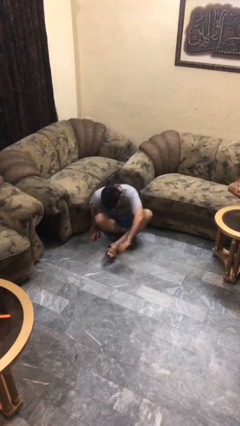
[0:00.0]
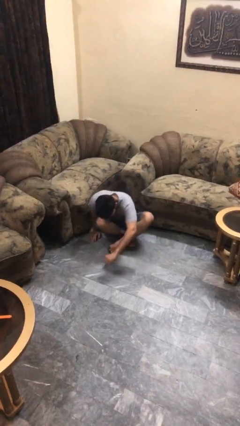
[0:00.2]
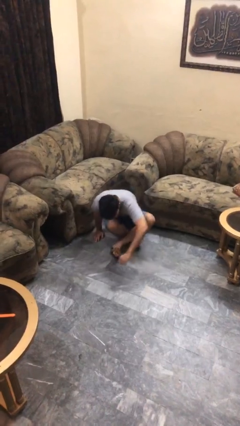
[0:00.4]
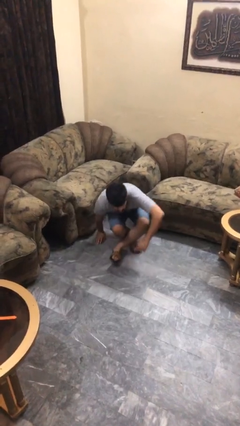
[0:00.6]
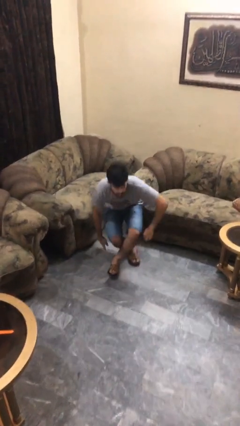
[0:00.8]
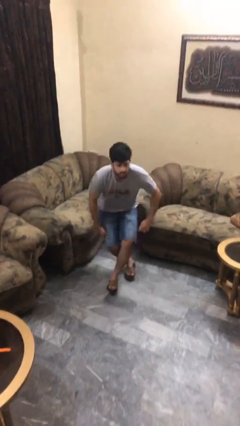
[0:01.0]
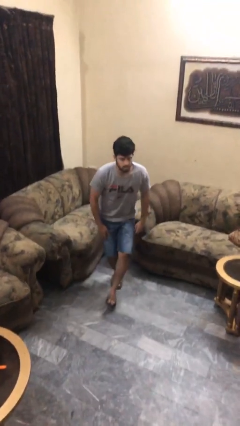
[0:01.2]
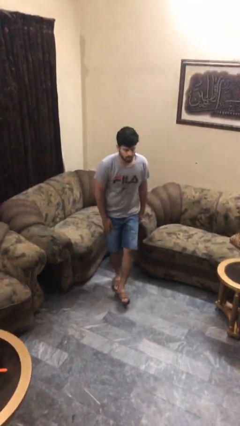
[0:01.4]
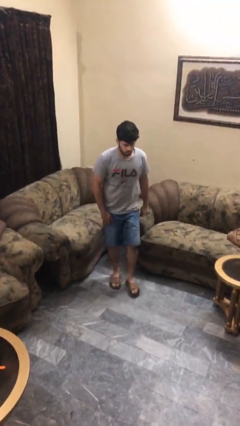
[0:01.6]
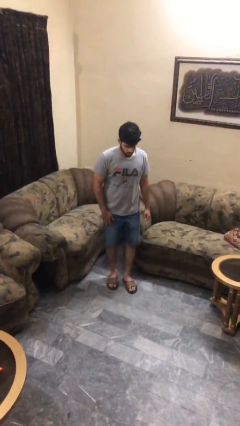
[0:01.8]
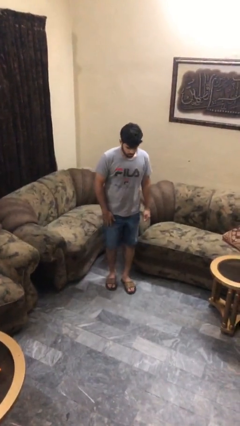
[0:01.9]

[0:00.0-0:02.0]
person stands up from floor

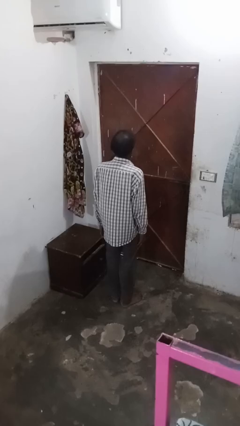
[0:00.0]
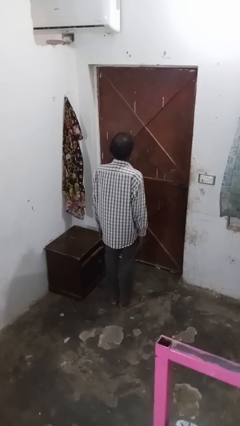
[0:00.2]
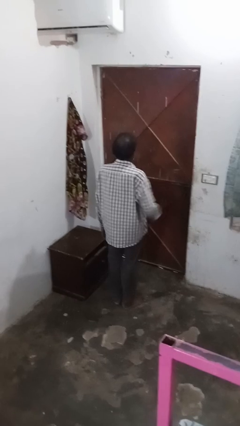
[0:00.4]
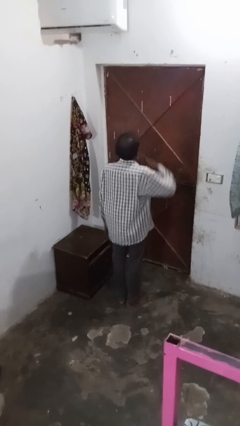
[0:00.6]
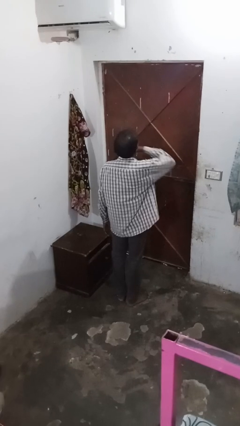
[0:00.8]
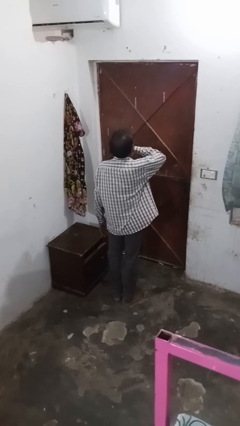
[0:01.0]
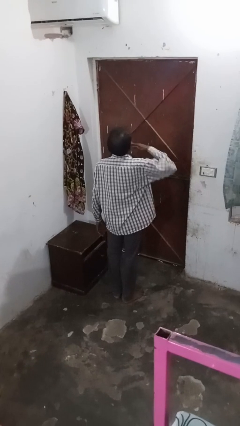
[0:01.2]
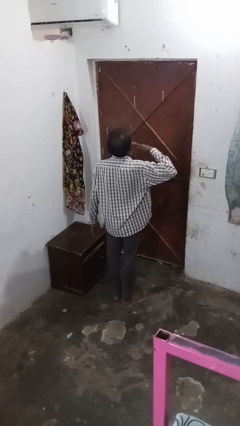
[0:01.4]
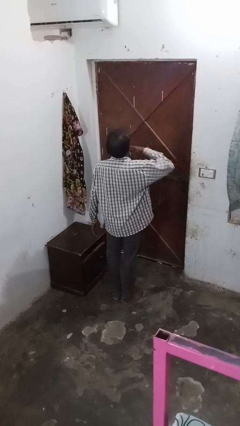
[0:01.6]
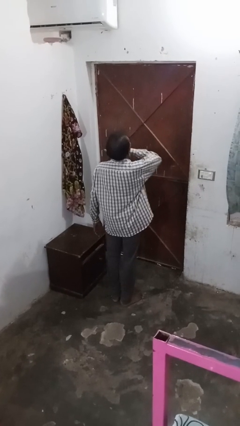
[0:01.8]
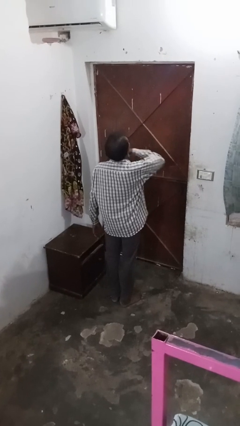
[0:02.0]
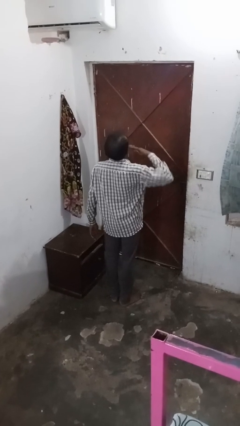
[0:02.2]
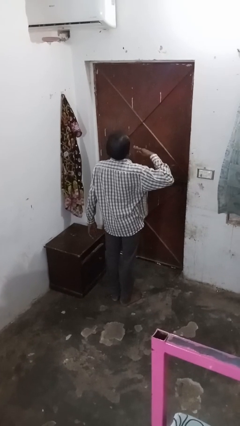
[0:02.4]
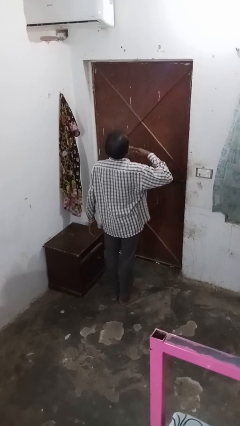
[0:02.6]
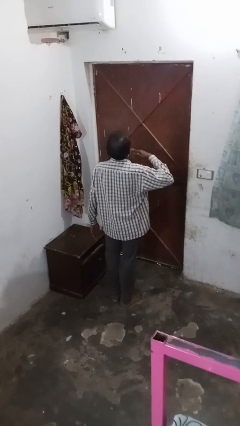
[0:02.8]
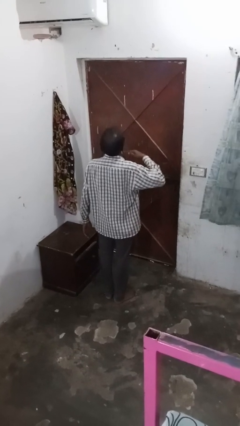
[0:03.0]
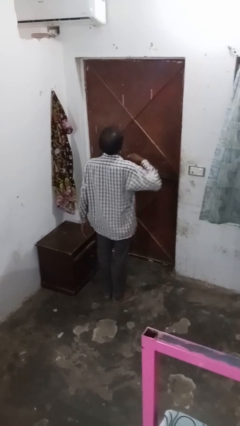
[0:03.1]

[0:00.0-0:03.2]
person gestures cut

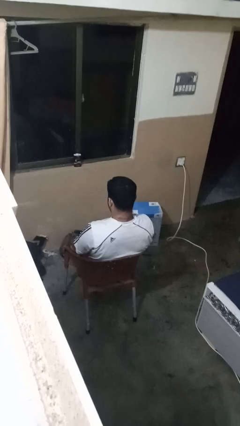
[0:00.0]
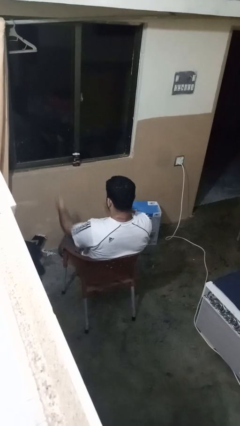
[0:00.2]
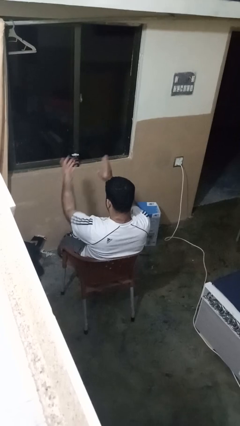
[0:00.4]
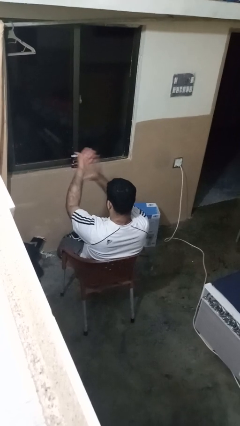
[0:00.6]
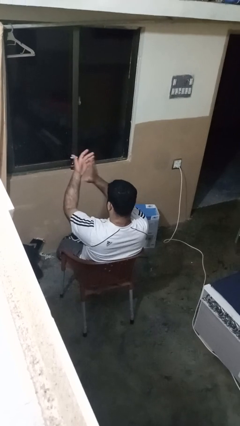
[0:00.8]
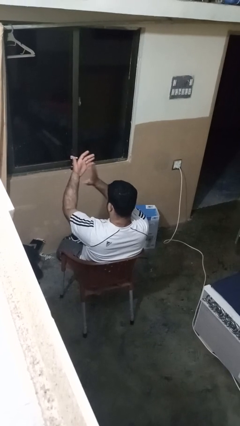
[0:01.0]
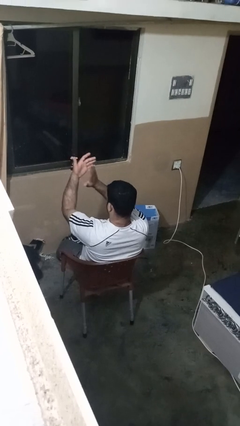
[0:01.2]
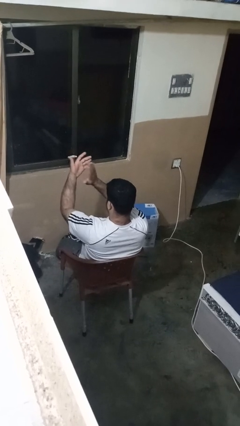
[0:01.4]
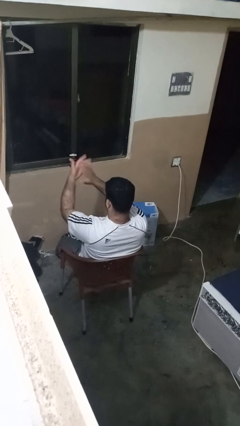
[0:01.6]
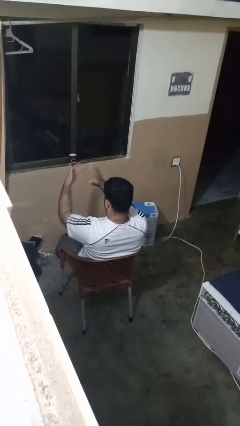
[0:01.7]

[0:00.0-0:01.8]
person claps hands

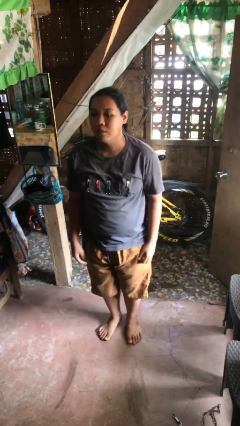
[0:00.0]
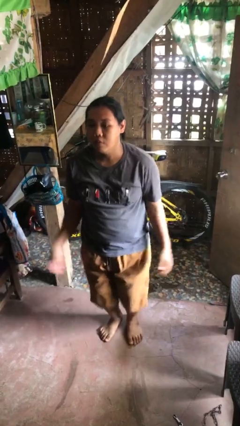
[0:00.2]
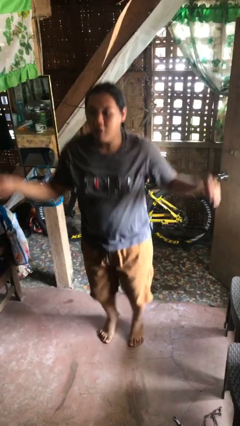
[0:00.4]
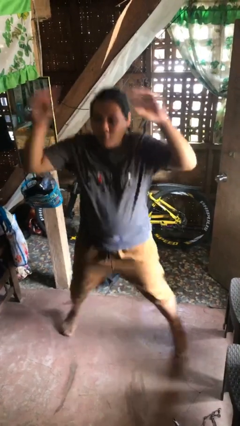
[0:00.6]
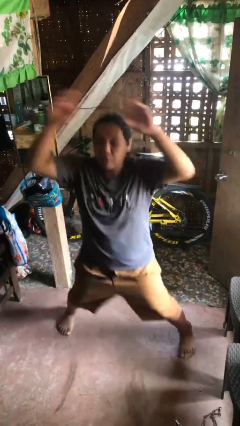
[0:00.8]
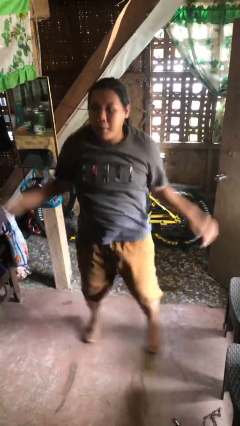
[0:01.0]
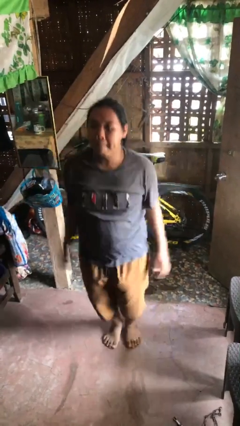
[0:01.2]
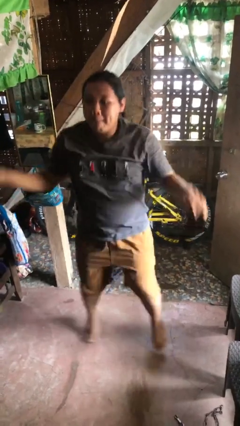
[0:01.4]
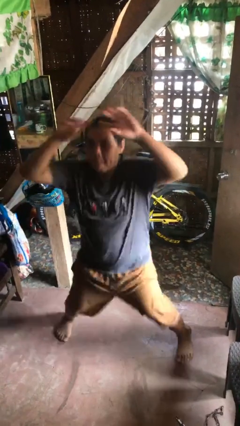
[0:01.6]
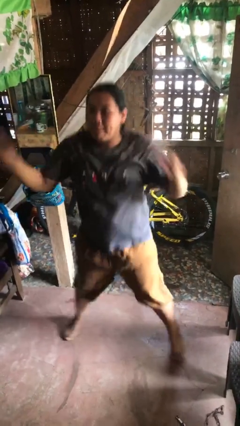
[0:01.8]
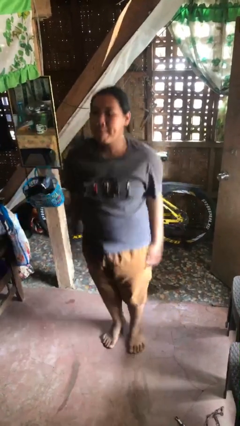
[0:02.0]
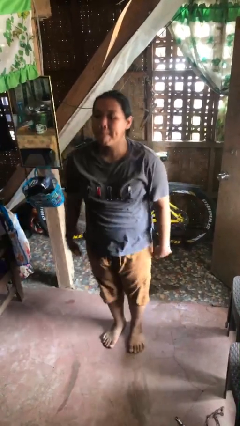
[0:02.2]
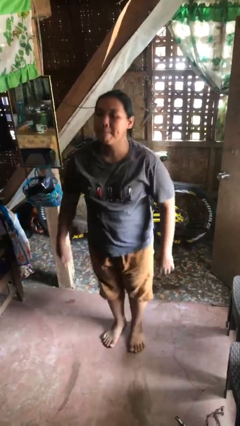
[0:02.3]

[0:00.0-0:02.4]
person exercises with jumping jacks

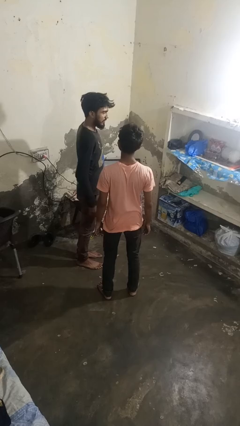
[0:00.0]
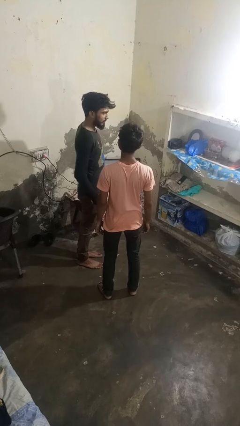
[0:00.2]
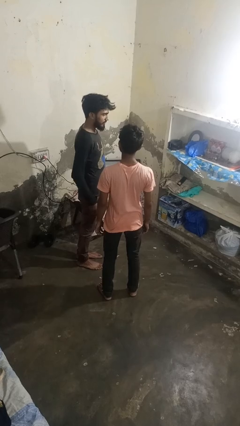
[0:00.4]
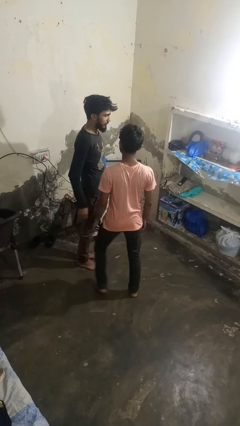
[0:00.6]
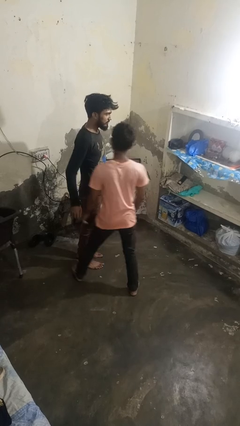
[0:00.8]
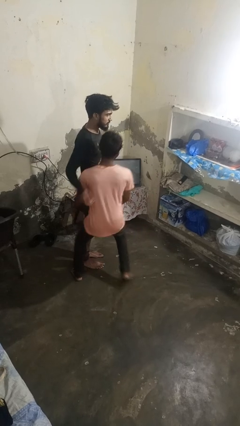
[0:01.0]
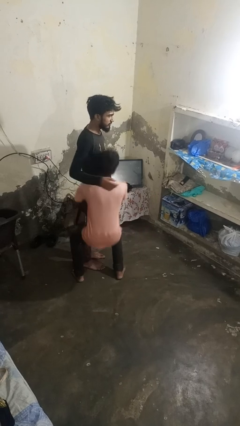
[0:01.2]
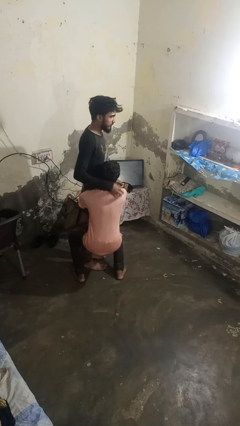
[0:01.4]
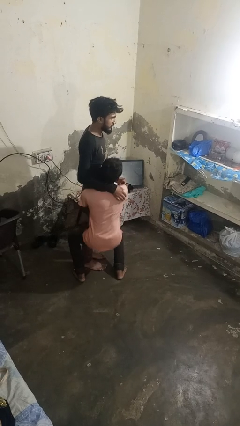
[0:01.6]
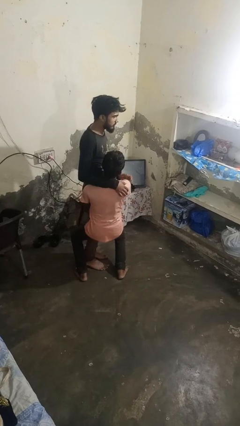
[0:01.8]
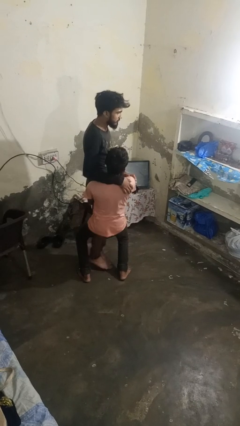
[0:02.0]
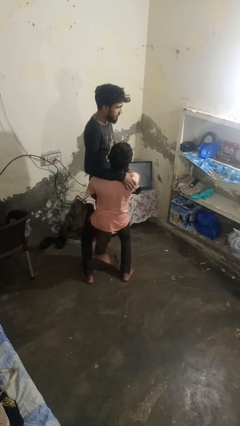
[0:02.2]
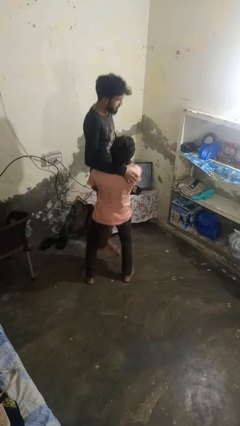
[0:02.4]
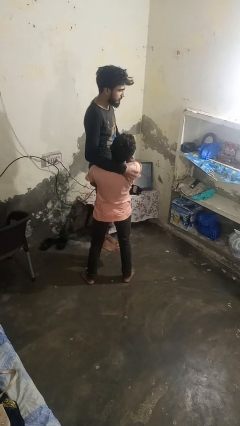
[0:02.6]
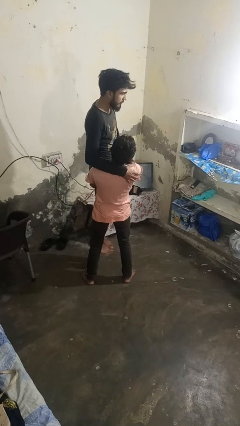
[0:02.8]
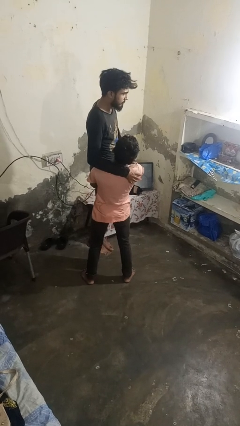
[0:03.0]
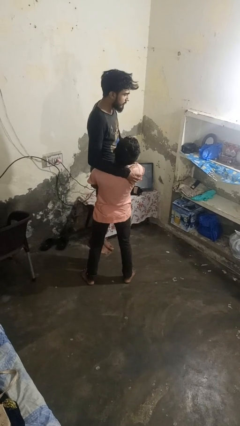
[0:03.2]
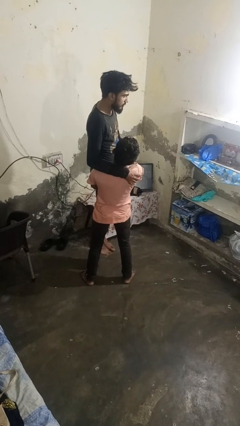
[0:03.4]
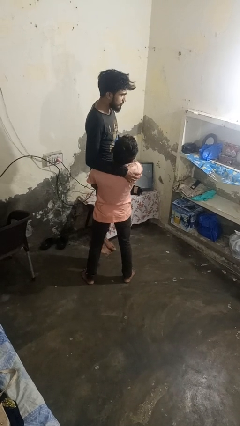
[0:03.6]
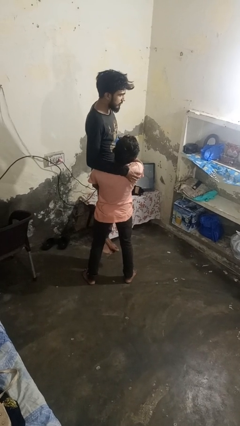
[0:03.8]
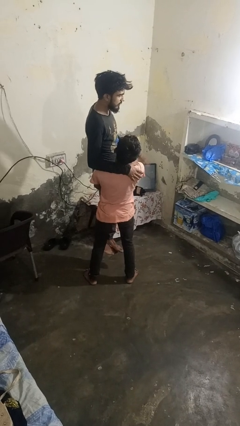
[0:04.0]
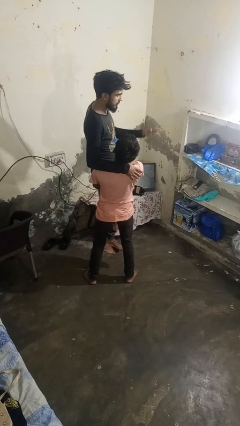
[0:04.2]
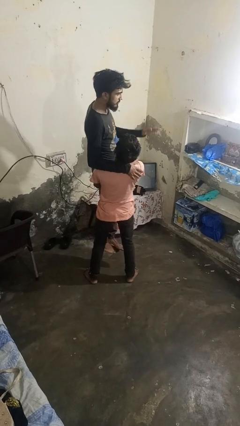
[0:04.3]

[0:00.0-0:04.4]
person picks up person

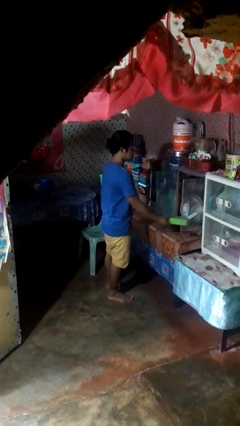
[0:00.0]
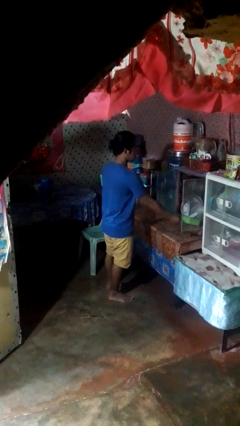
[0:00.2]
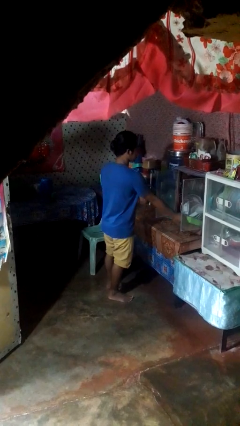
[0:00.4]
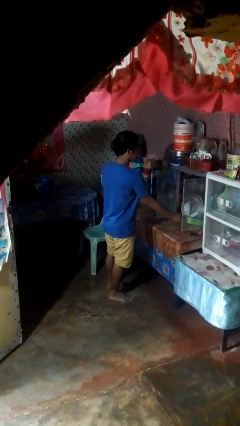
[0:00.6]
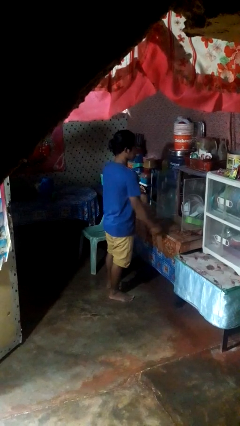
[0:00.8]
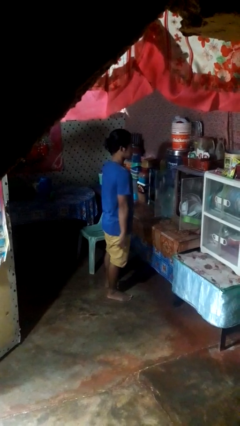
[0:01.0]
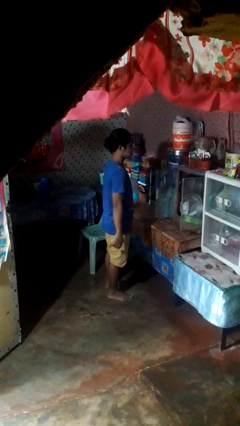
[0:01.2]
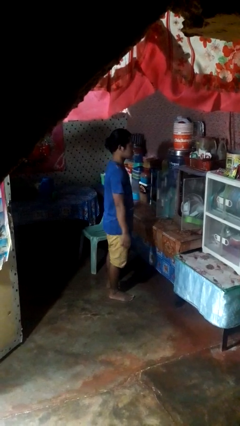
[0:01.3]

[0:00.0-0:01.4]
person puts down object into cabinet

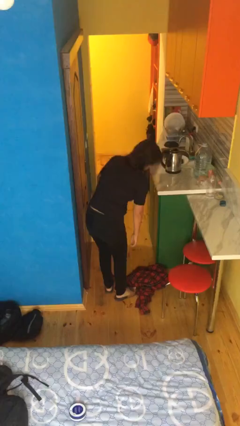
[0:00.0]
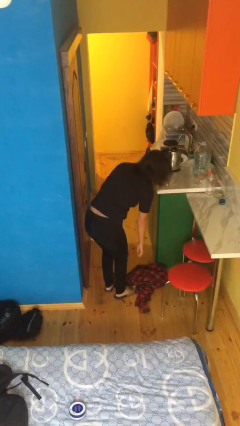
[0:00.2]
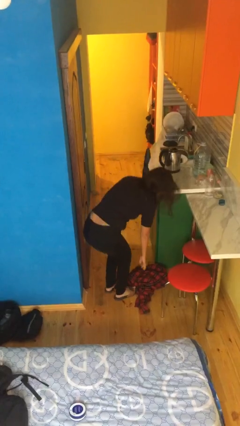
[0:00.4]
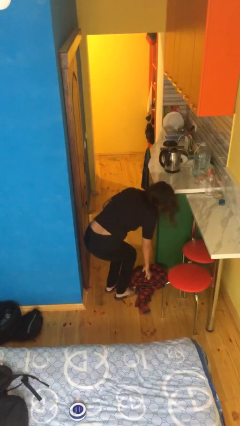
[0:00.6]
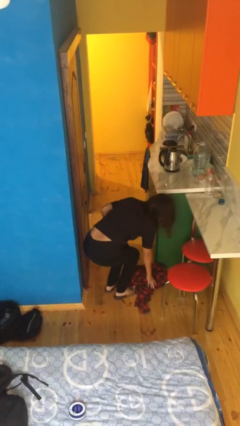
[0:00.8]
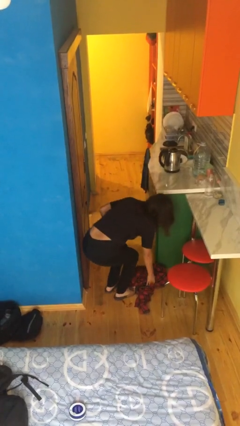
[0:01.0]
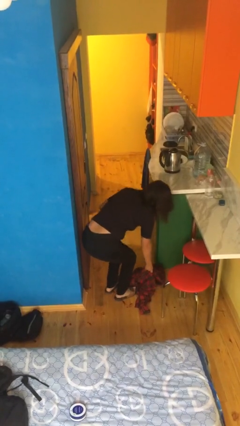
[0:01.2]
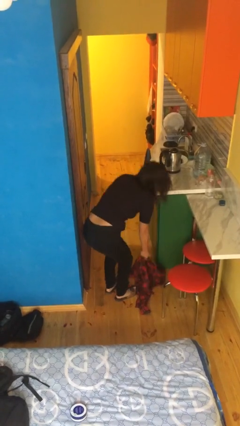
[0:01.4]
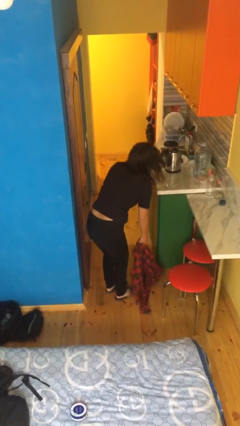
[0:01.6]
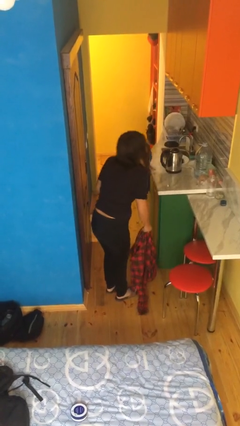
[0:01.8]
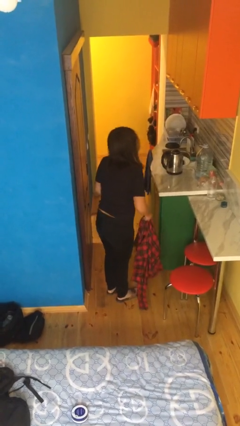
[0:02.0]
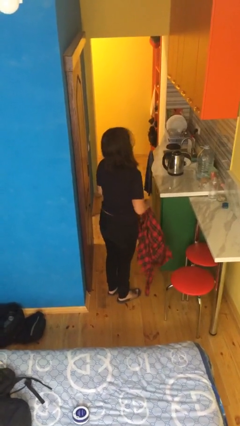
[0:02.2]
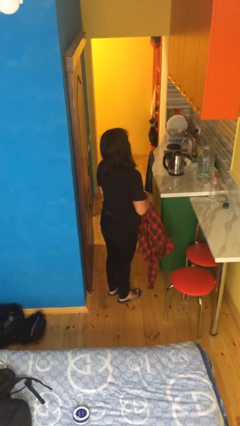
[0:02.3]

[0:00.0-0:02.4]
person picks up object from floor
